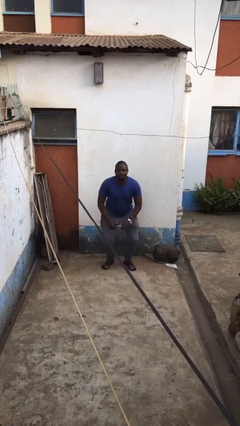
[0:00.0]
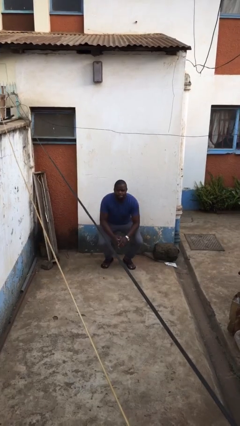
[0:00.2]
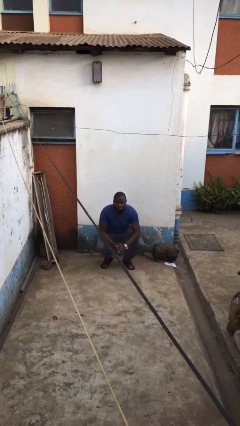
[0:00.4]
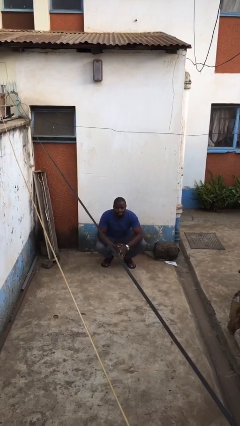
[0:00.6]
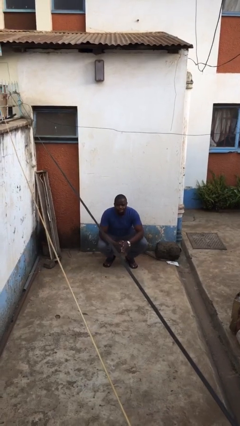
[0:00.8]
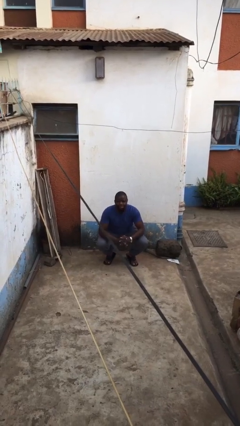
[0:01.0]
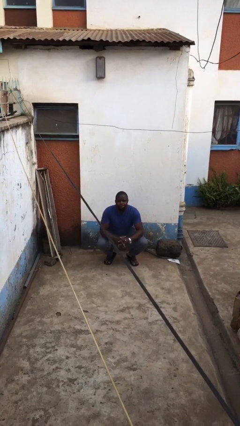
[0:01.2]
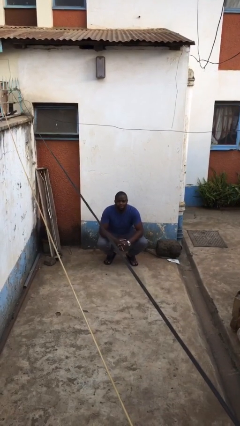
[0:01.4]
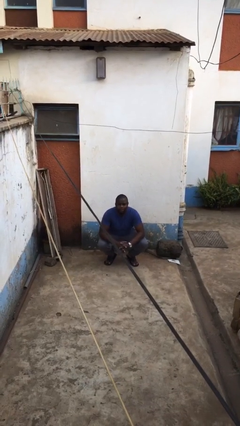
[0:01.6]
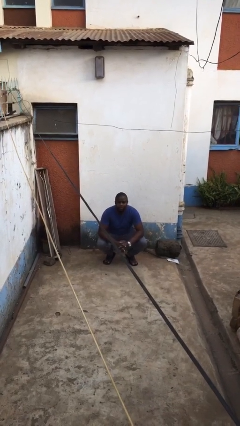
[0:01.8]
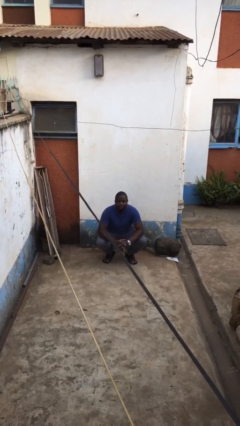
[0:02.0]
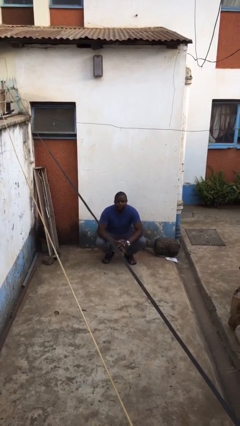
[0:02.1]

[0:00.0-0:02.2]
person squats

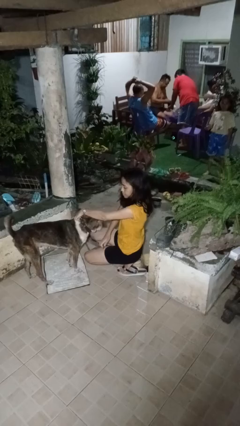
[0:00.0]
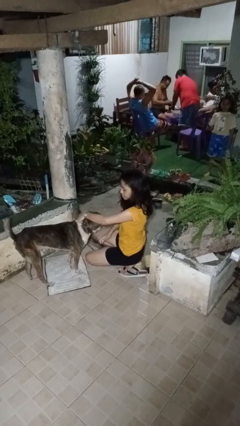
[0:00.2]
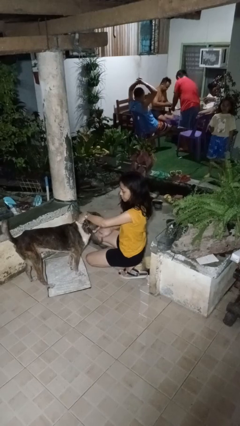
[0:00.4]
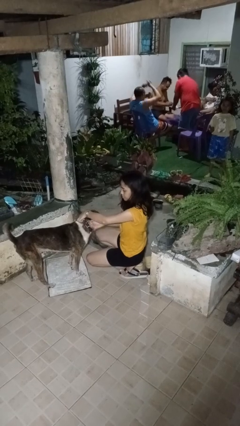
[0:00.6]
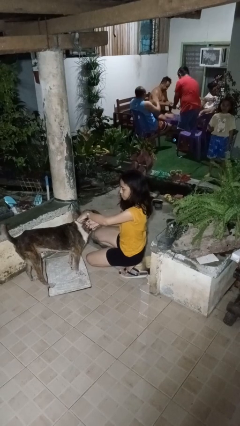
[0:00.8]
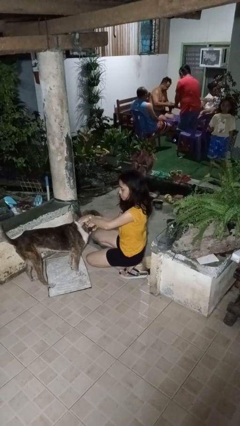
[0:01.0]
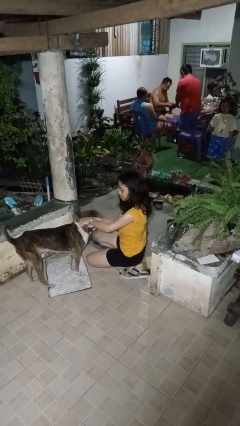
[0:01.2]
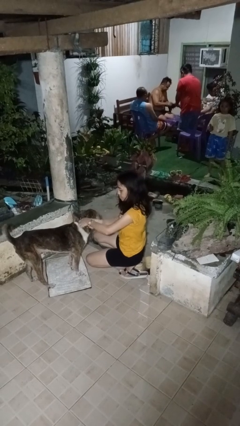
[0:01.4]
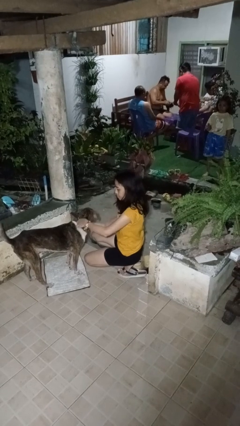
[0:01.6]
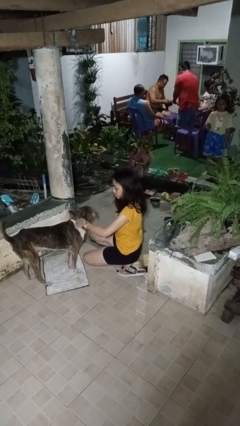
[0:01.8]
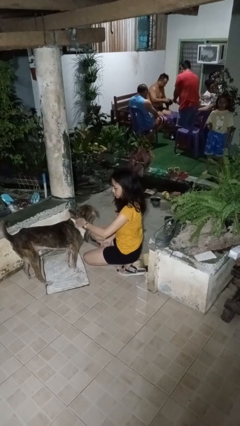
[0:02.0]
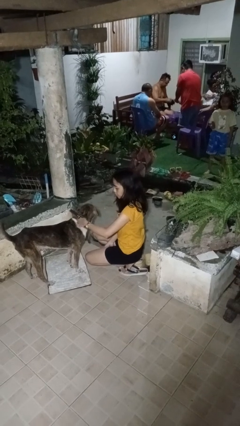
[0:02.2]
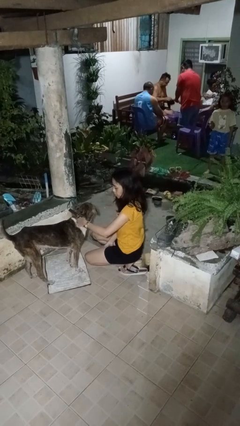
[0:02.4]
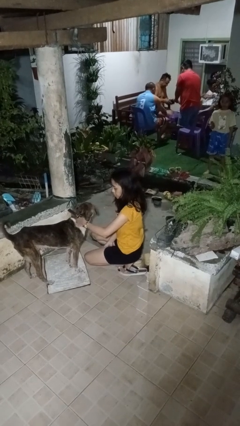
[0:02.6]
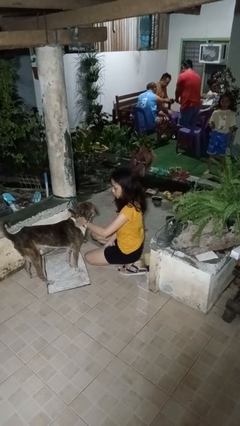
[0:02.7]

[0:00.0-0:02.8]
person attaches leash to dog

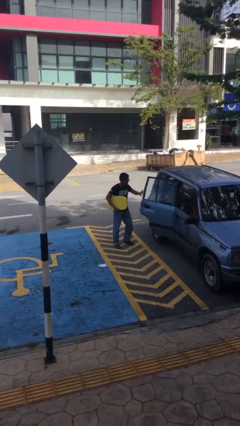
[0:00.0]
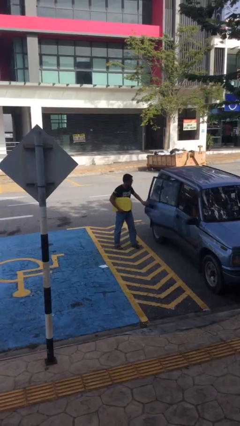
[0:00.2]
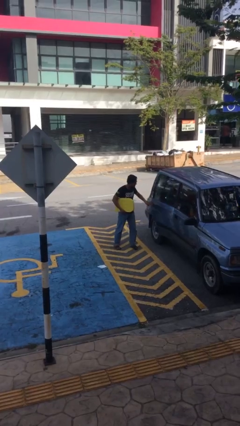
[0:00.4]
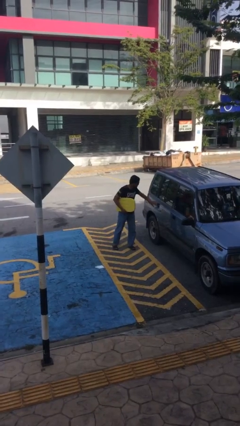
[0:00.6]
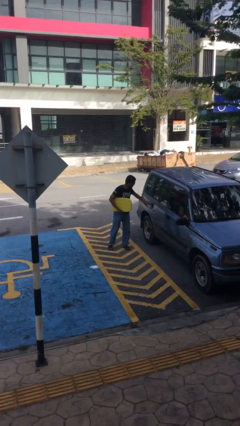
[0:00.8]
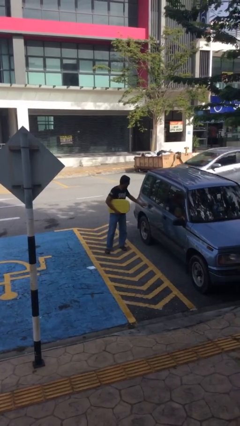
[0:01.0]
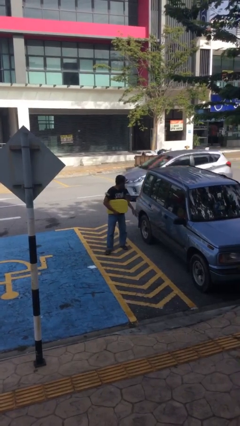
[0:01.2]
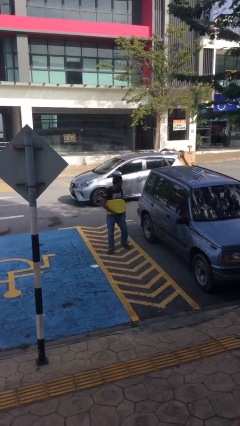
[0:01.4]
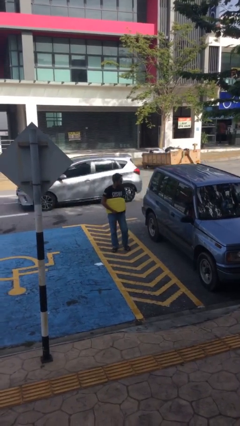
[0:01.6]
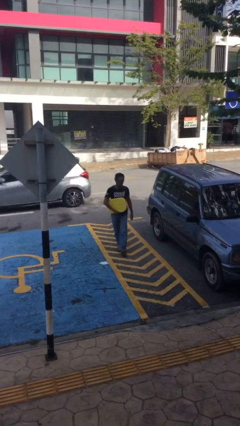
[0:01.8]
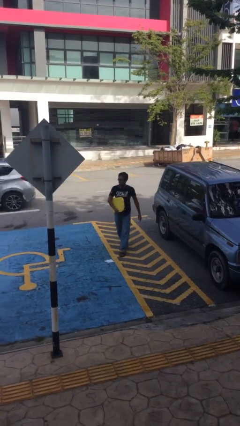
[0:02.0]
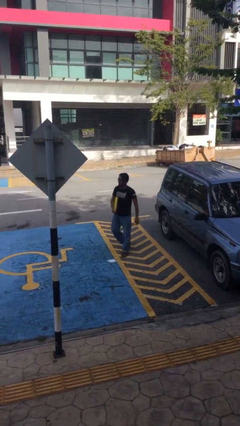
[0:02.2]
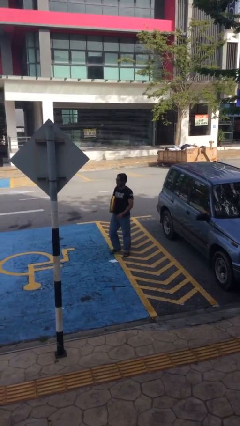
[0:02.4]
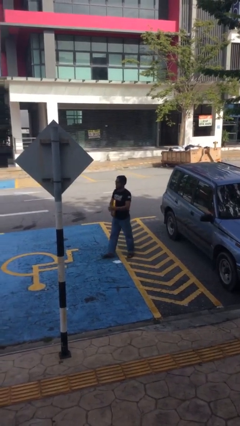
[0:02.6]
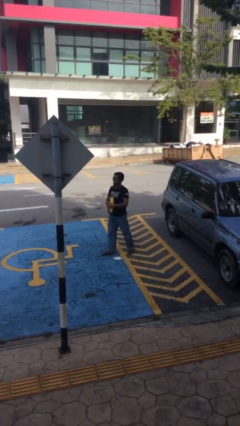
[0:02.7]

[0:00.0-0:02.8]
person closes car door

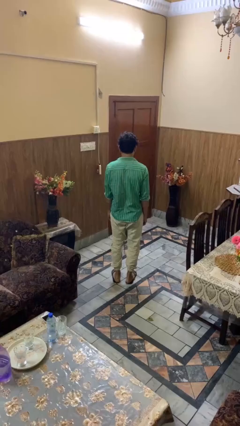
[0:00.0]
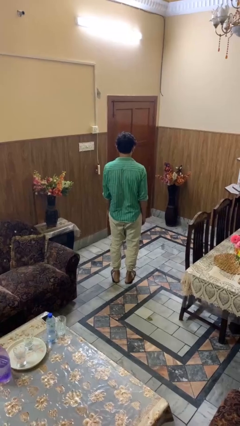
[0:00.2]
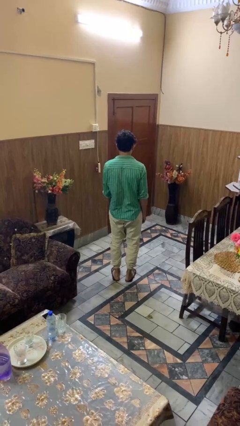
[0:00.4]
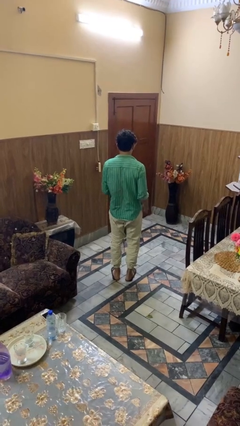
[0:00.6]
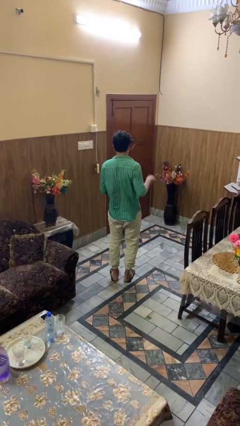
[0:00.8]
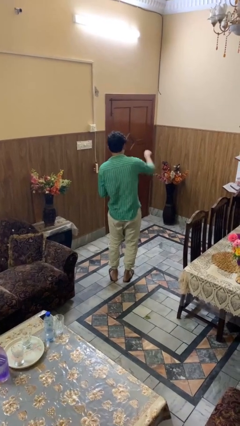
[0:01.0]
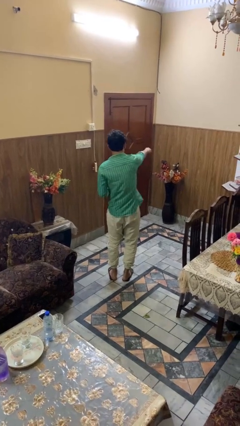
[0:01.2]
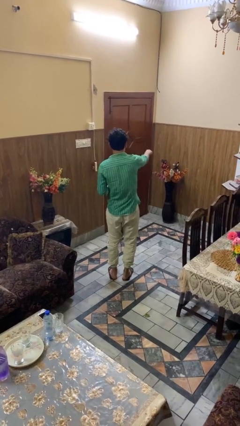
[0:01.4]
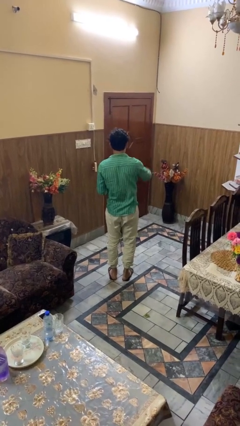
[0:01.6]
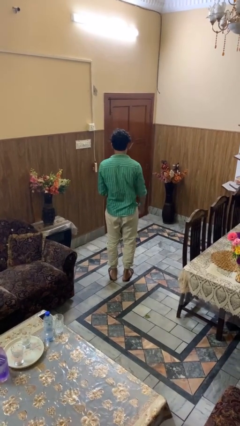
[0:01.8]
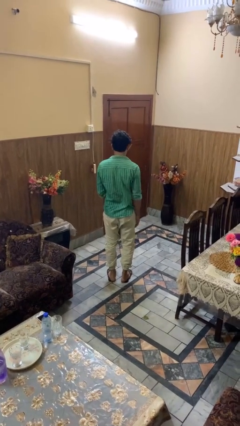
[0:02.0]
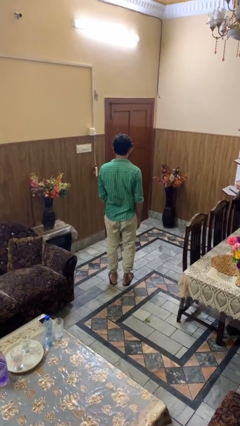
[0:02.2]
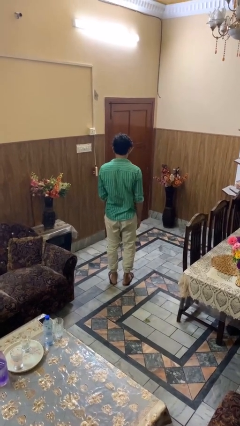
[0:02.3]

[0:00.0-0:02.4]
person karate chop

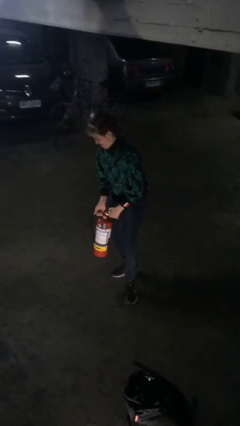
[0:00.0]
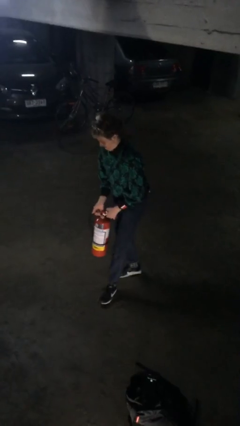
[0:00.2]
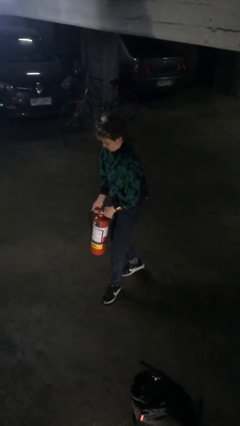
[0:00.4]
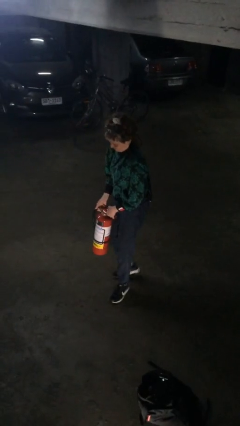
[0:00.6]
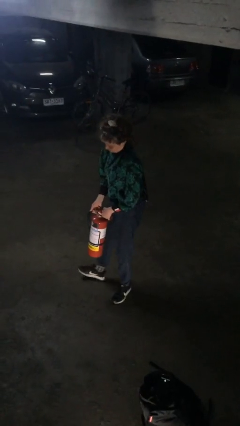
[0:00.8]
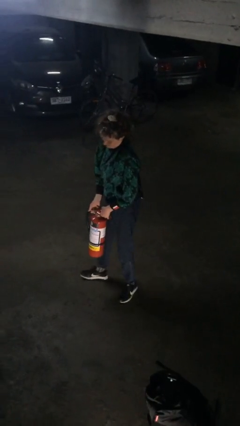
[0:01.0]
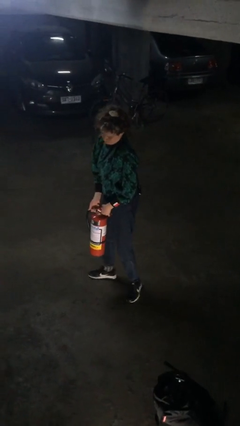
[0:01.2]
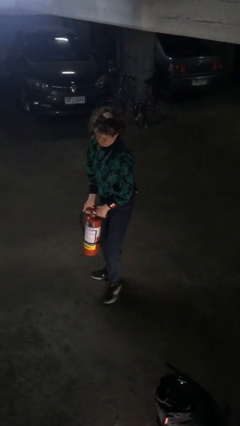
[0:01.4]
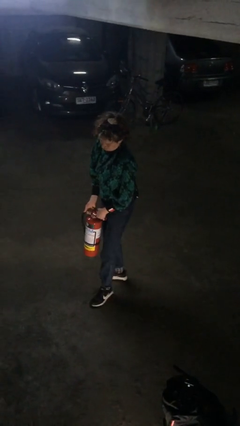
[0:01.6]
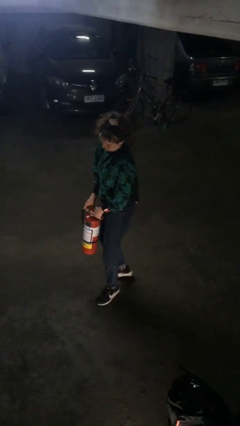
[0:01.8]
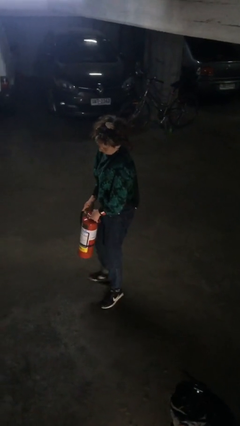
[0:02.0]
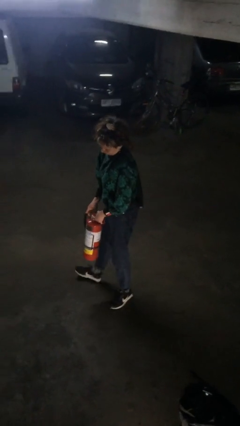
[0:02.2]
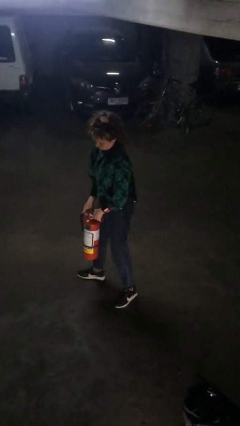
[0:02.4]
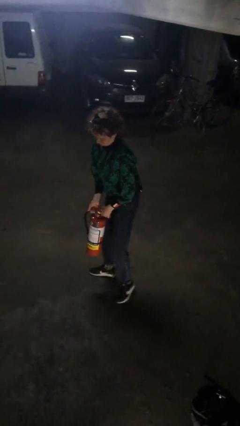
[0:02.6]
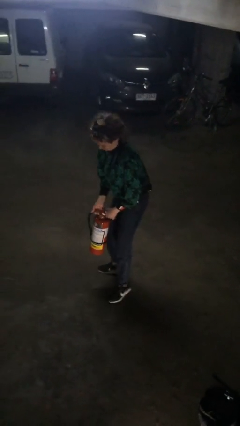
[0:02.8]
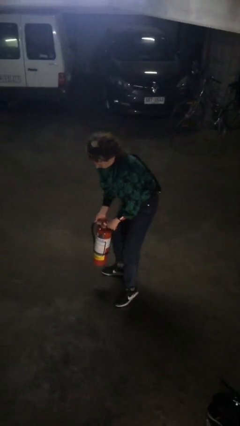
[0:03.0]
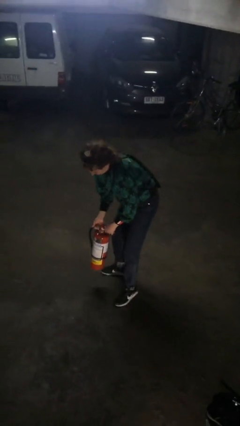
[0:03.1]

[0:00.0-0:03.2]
person carries heavy object

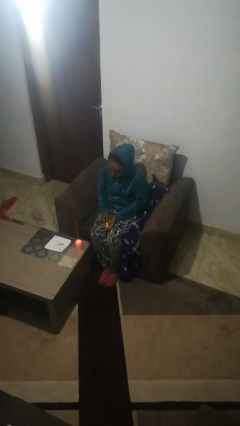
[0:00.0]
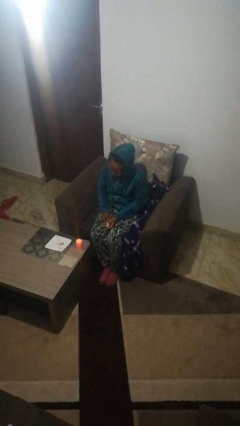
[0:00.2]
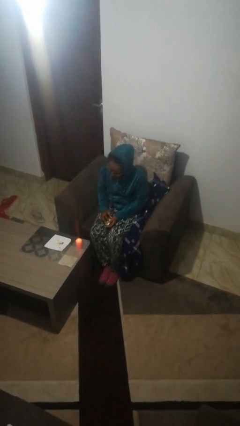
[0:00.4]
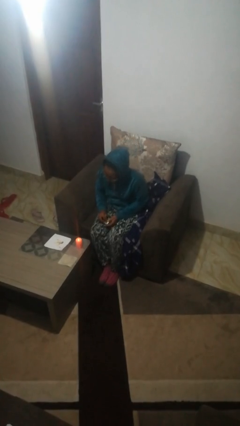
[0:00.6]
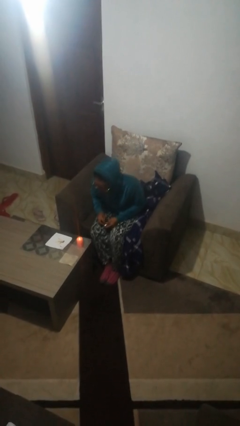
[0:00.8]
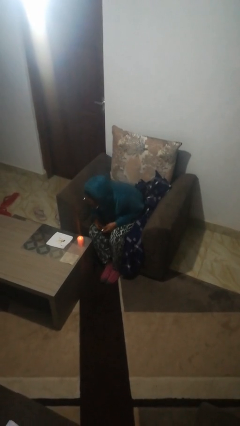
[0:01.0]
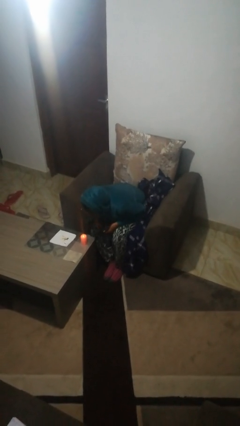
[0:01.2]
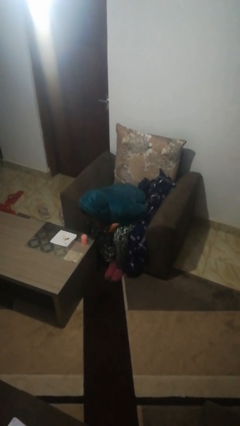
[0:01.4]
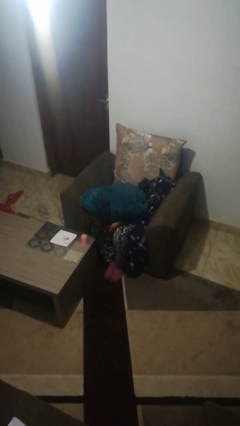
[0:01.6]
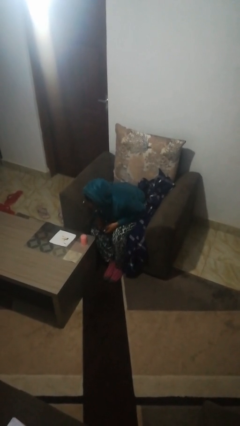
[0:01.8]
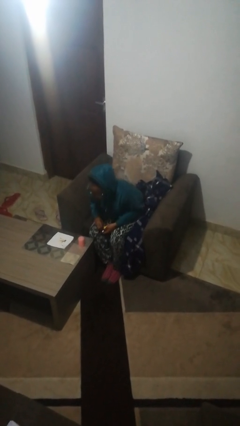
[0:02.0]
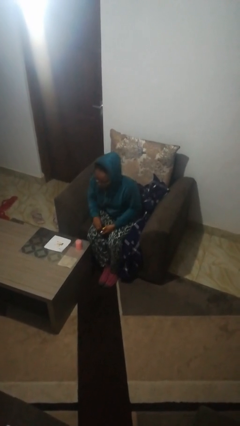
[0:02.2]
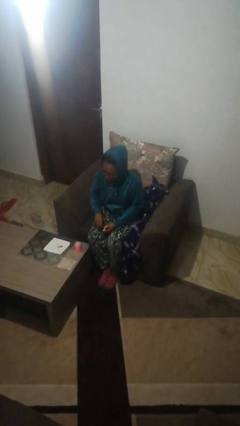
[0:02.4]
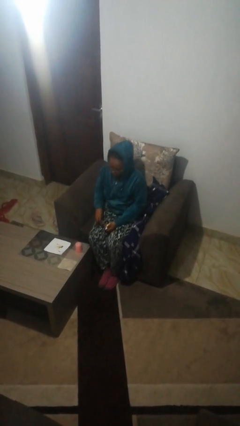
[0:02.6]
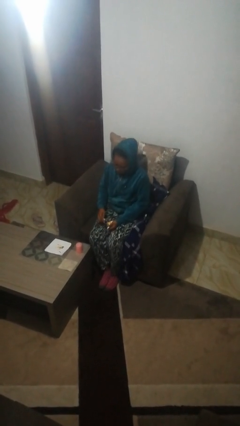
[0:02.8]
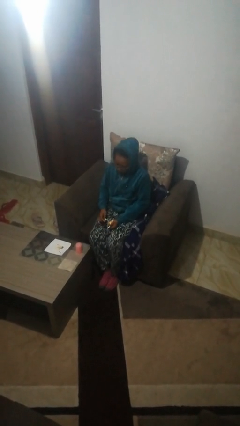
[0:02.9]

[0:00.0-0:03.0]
person extinguishes candle

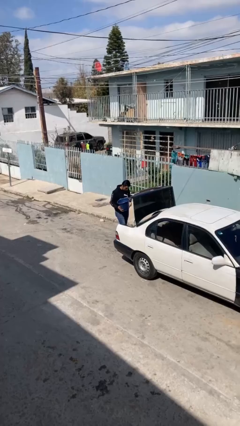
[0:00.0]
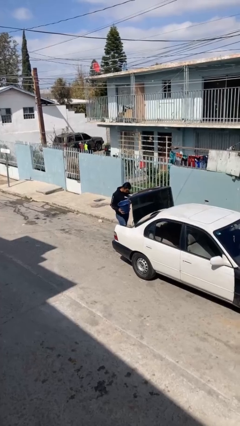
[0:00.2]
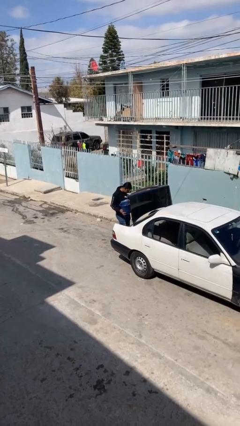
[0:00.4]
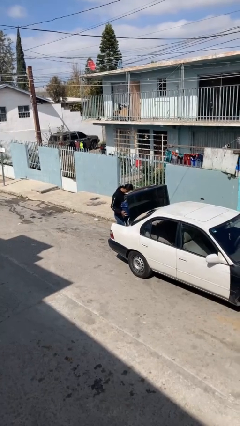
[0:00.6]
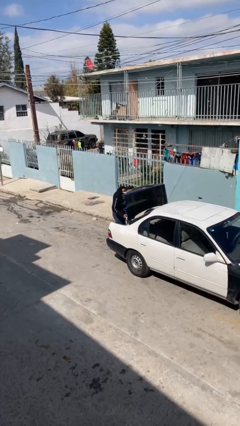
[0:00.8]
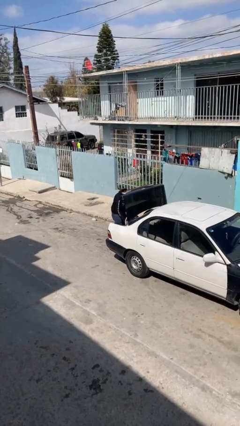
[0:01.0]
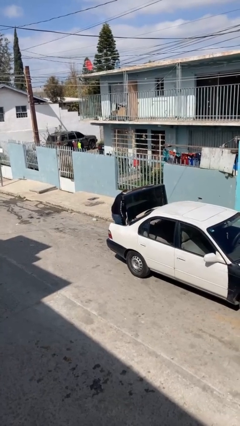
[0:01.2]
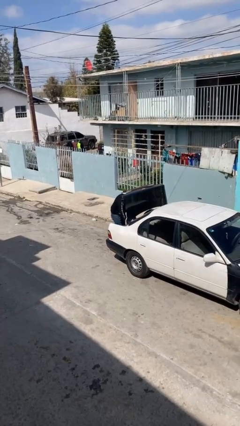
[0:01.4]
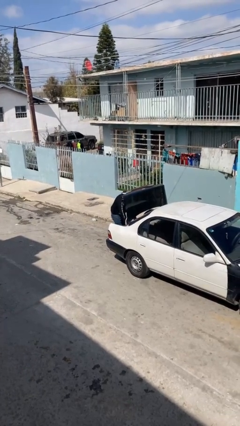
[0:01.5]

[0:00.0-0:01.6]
person loads car
